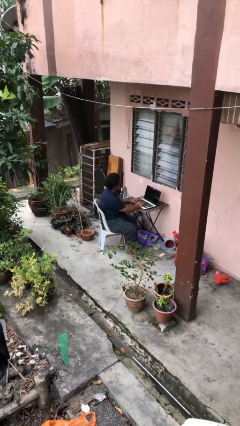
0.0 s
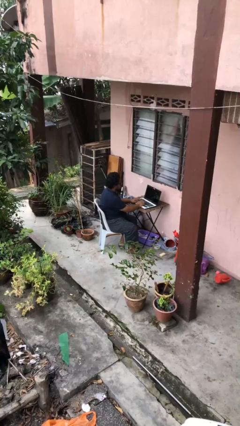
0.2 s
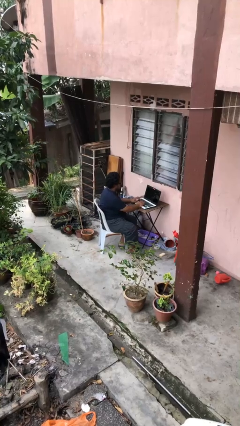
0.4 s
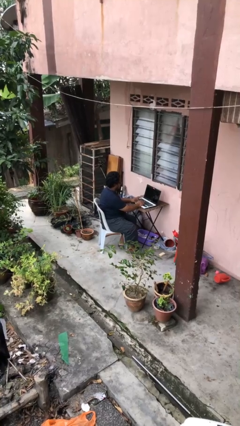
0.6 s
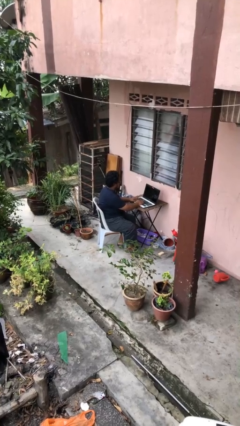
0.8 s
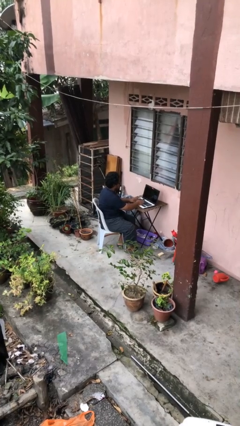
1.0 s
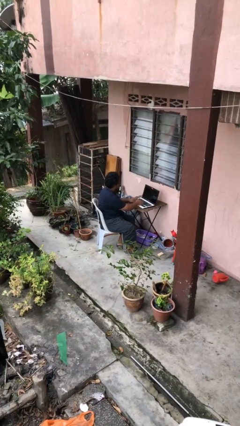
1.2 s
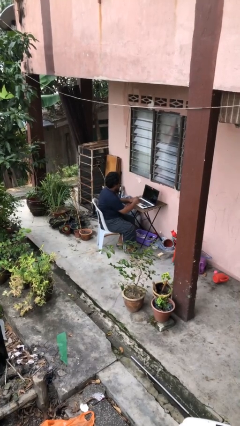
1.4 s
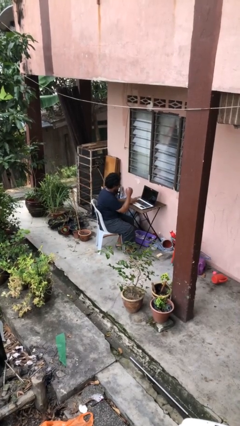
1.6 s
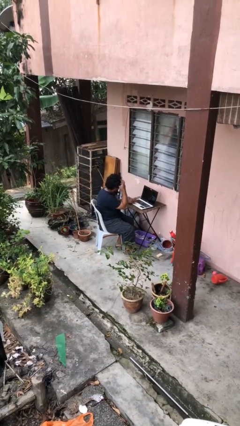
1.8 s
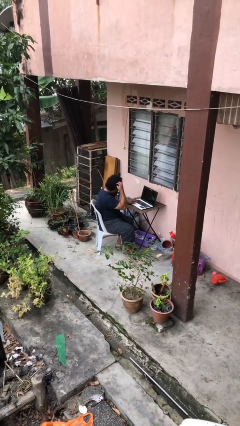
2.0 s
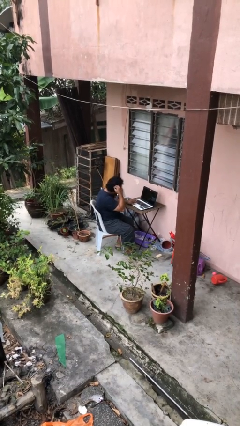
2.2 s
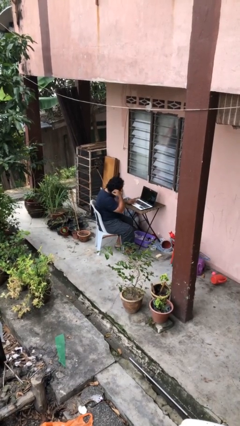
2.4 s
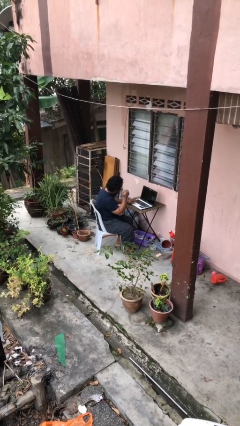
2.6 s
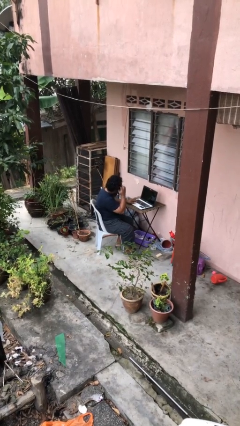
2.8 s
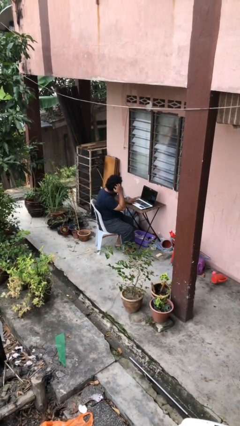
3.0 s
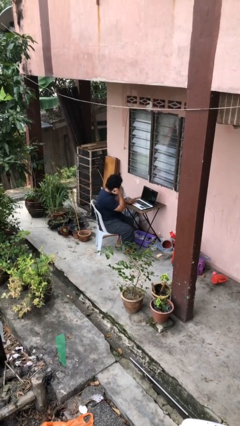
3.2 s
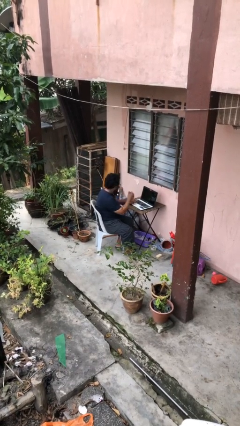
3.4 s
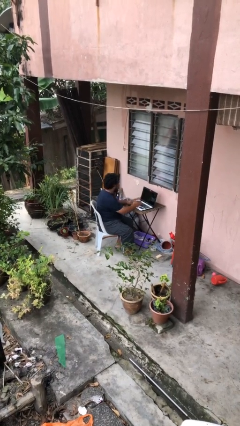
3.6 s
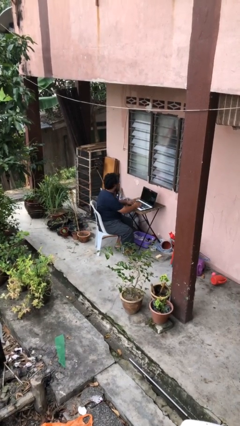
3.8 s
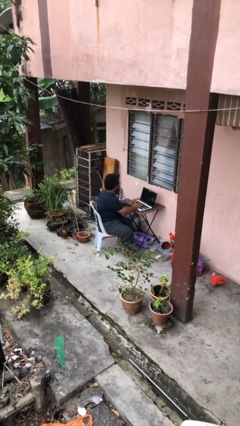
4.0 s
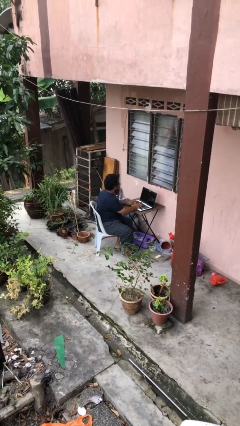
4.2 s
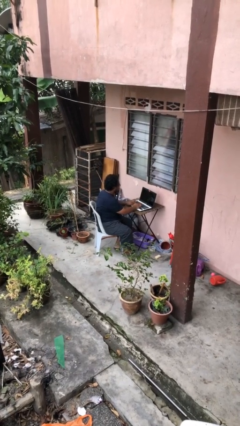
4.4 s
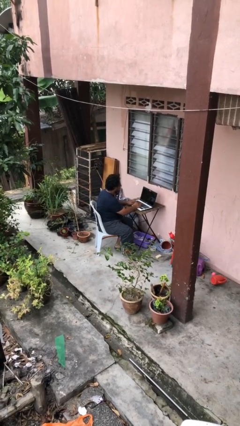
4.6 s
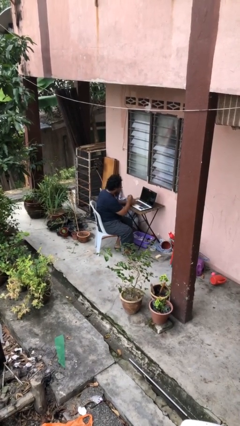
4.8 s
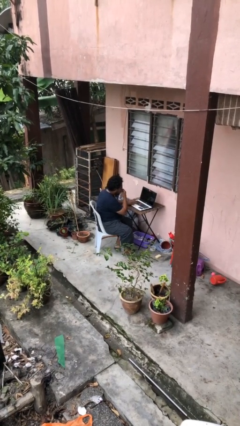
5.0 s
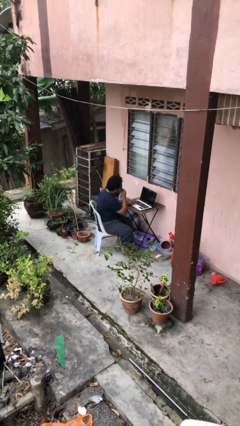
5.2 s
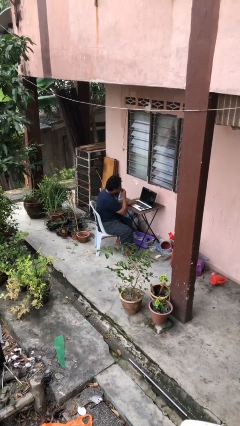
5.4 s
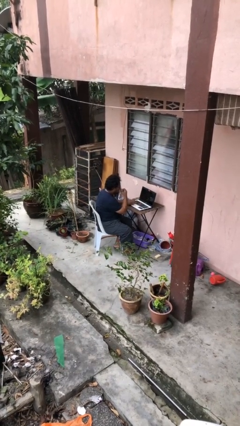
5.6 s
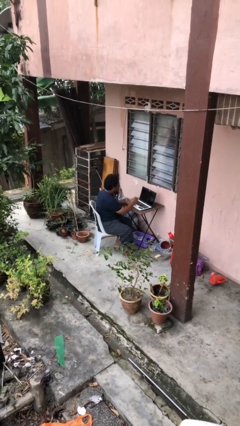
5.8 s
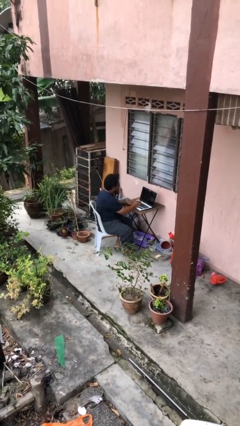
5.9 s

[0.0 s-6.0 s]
person interacts with laptop

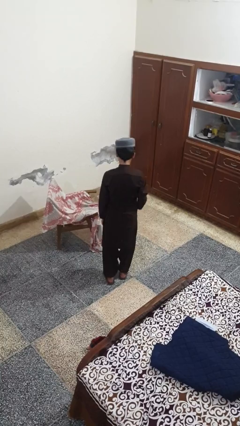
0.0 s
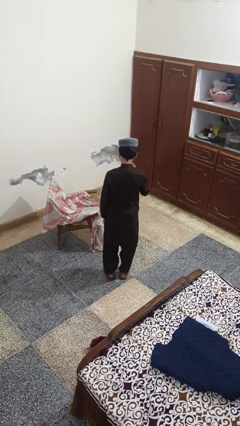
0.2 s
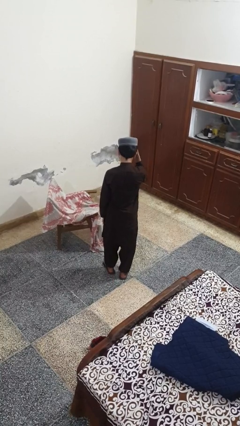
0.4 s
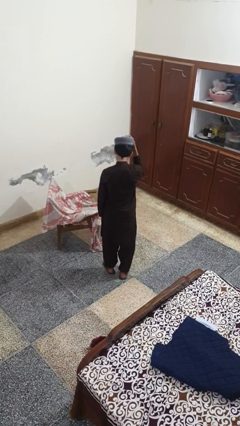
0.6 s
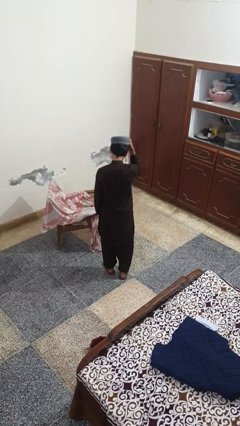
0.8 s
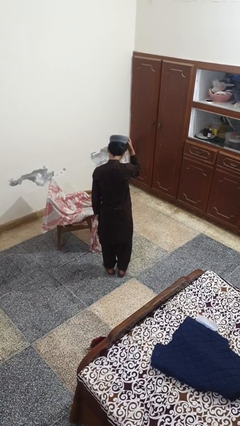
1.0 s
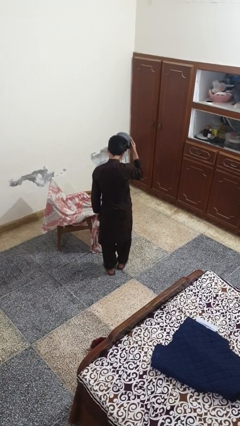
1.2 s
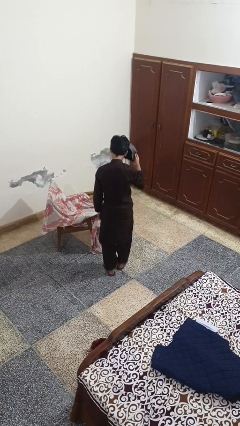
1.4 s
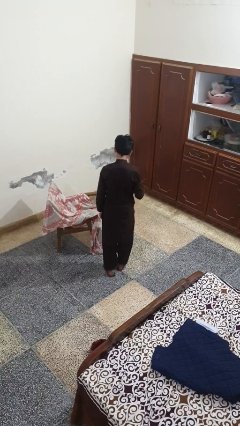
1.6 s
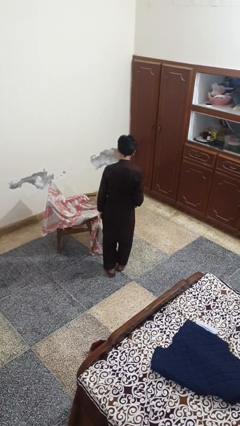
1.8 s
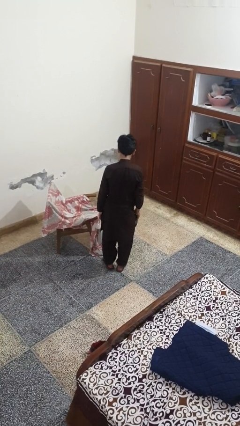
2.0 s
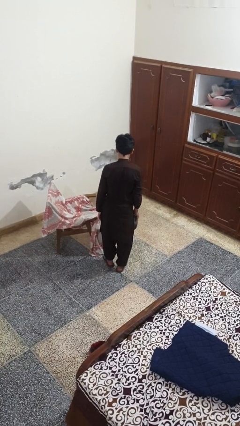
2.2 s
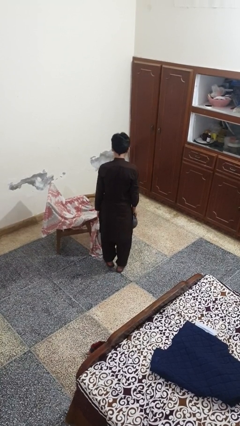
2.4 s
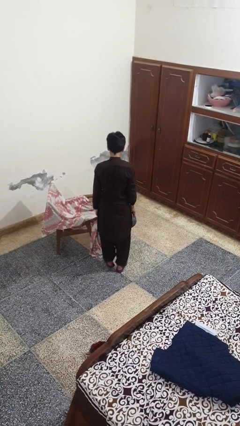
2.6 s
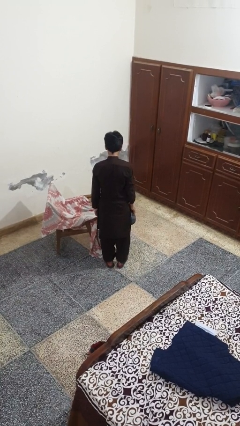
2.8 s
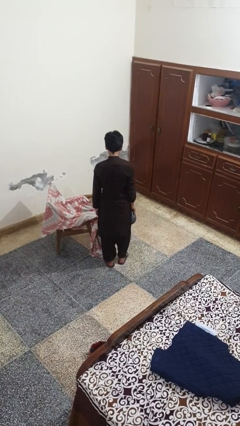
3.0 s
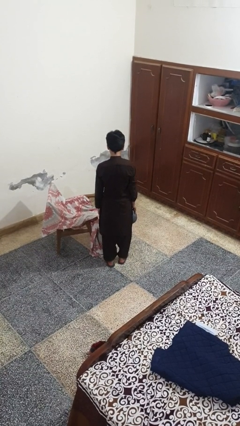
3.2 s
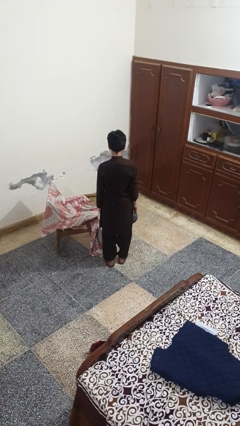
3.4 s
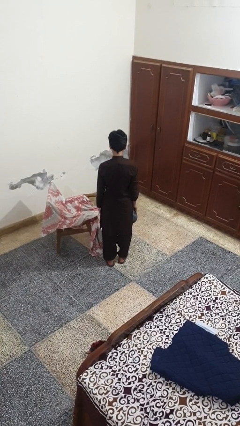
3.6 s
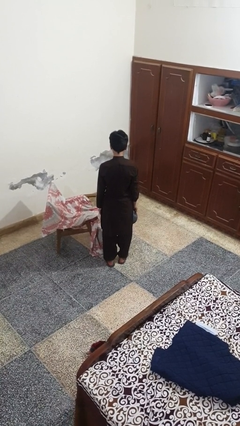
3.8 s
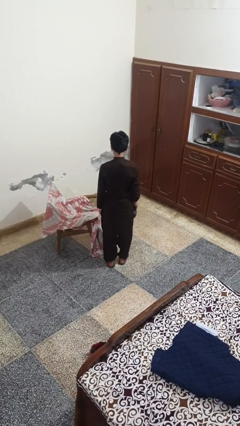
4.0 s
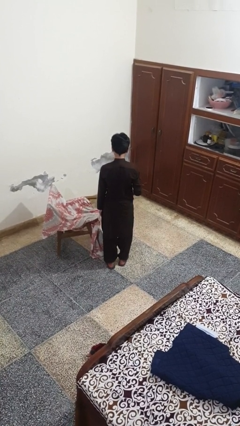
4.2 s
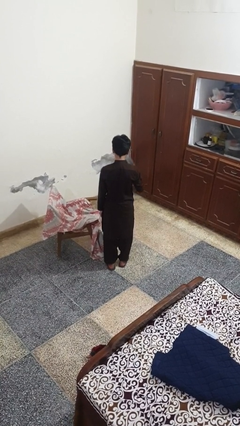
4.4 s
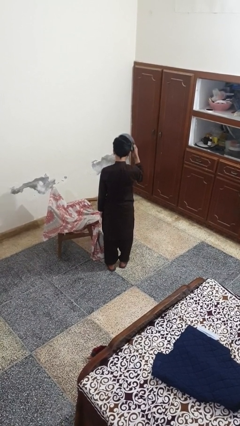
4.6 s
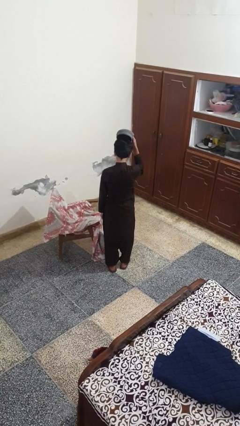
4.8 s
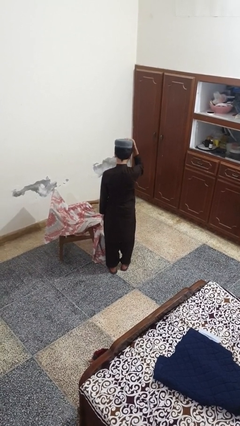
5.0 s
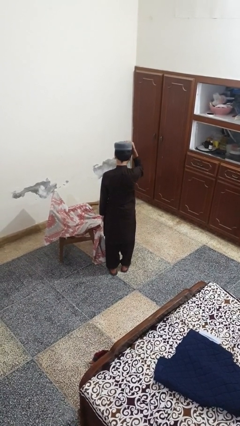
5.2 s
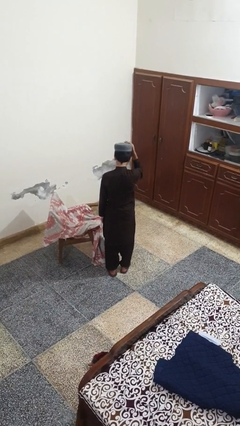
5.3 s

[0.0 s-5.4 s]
person takes off hat

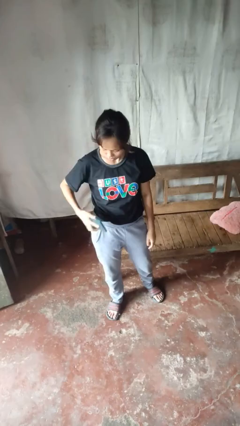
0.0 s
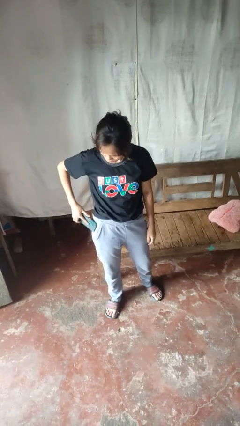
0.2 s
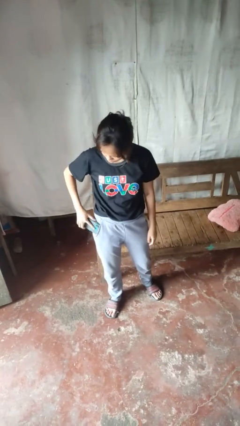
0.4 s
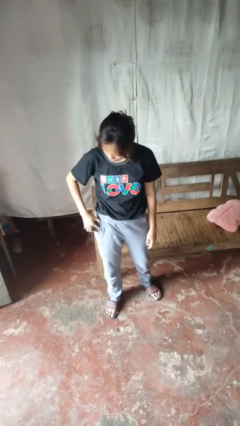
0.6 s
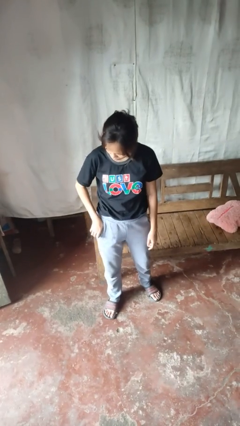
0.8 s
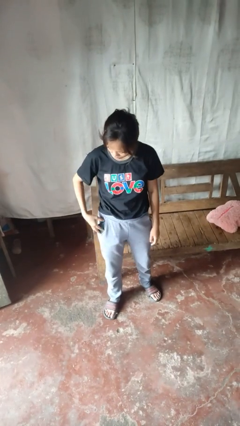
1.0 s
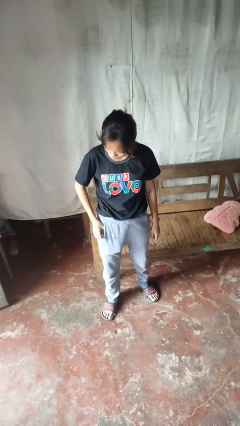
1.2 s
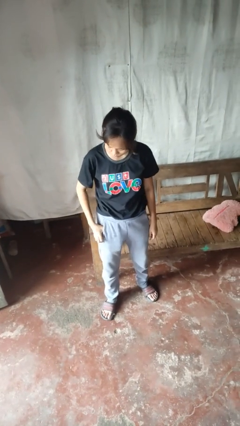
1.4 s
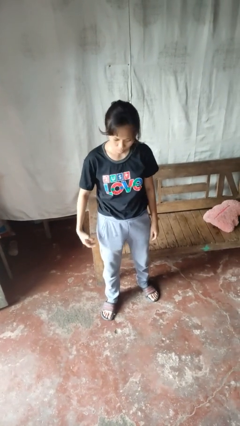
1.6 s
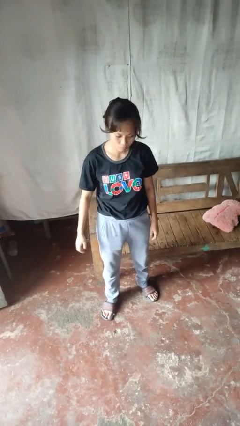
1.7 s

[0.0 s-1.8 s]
person puts phone into pocket

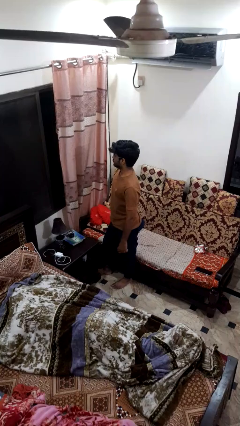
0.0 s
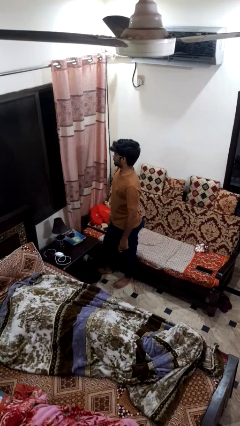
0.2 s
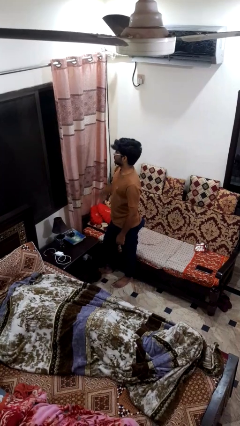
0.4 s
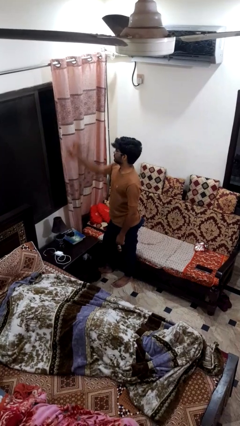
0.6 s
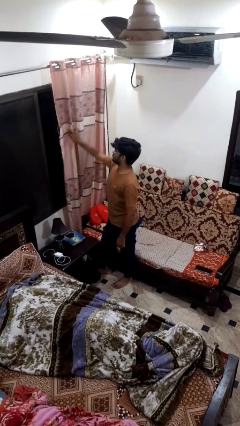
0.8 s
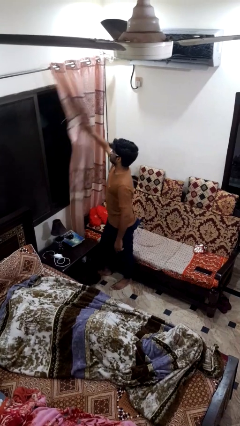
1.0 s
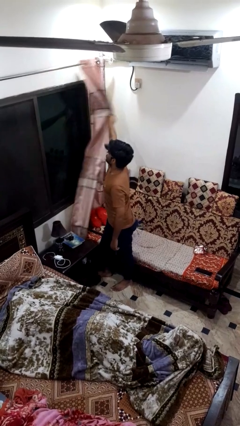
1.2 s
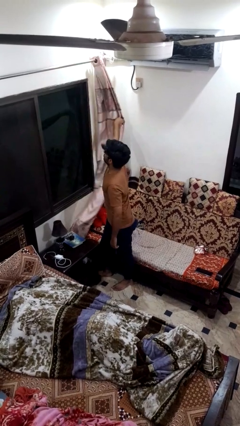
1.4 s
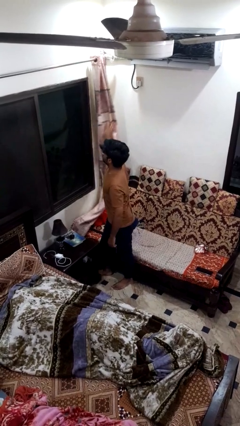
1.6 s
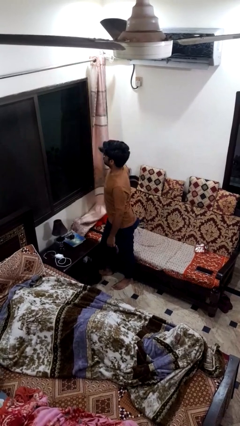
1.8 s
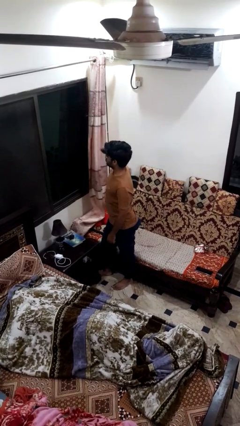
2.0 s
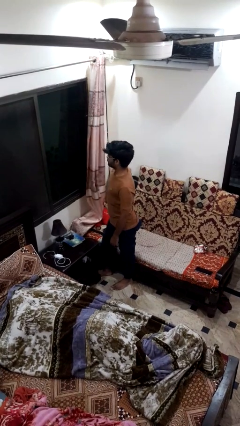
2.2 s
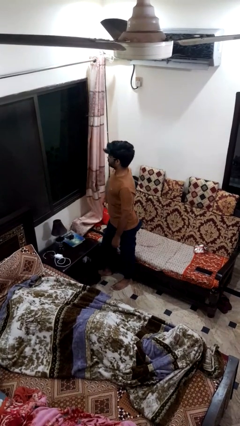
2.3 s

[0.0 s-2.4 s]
person opens curtains

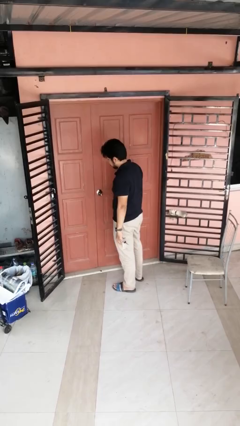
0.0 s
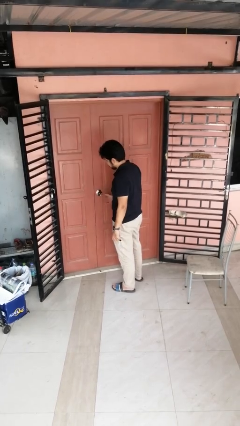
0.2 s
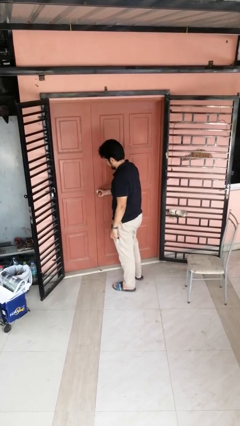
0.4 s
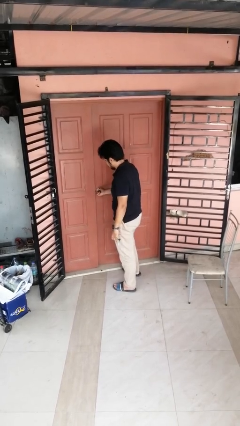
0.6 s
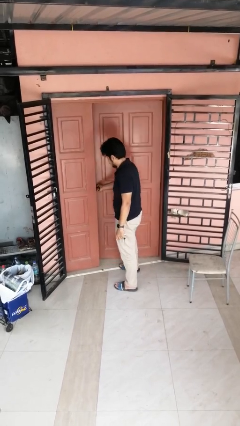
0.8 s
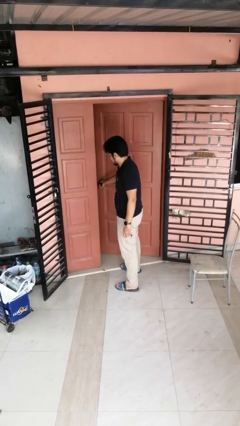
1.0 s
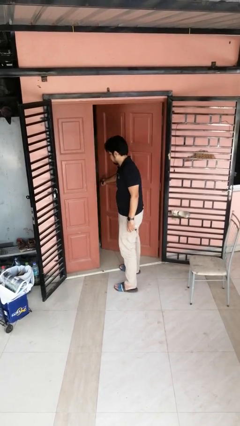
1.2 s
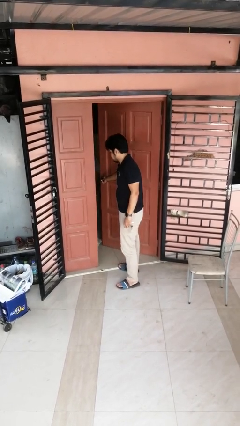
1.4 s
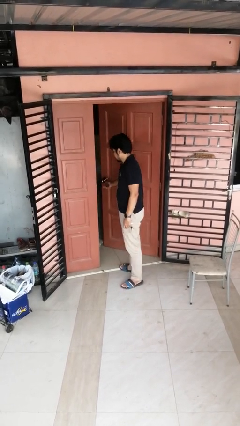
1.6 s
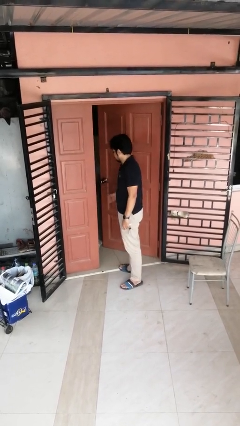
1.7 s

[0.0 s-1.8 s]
person opens facility door
